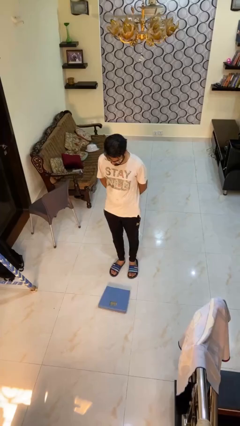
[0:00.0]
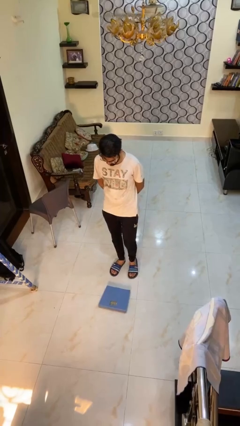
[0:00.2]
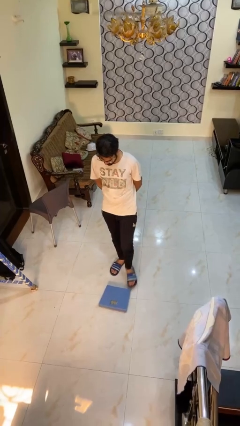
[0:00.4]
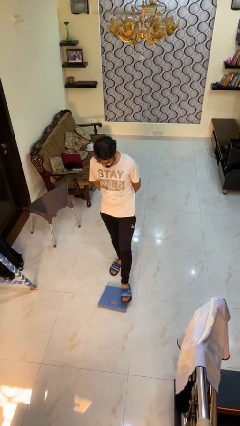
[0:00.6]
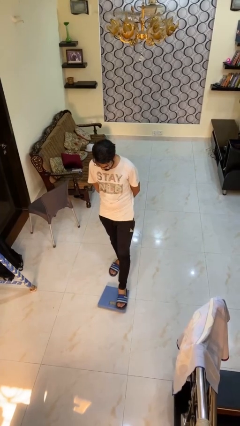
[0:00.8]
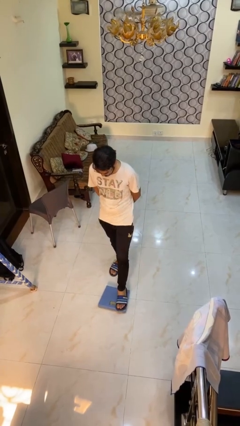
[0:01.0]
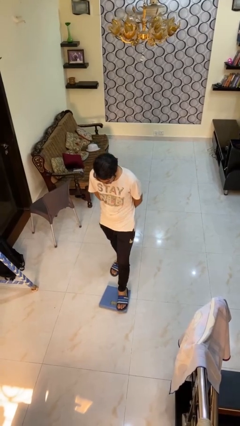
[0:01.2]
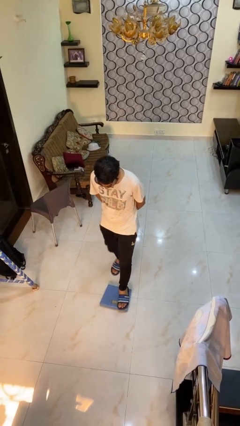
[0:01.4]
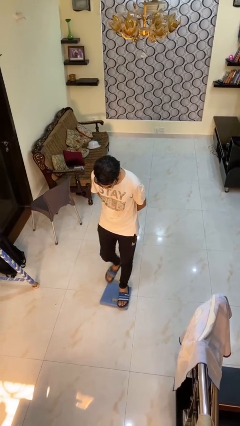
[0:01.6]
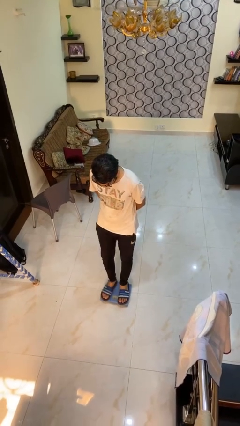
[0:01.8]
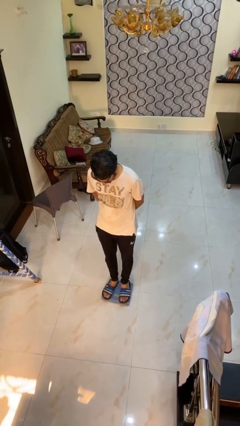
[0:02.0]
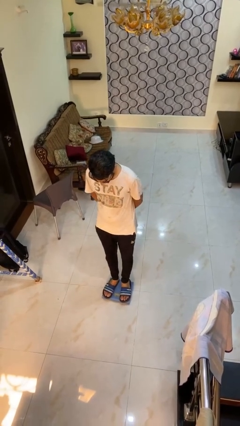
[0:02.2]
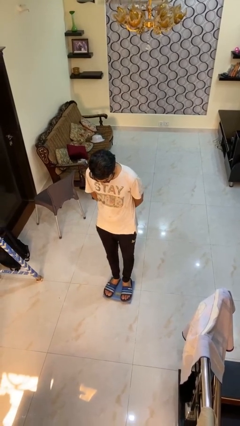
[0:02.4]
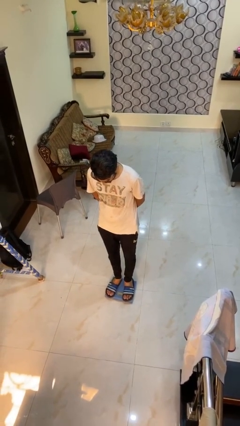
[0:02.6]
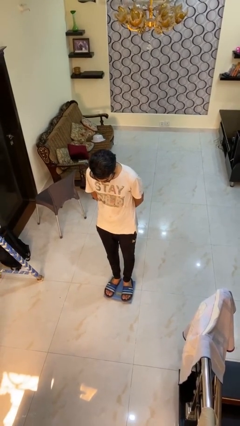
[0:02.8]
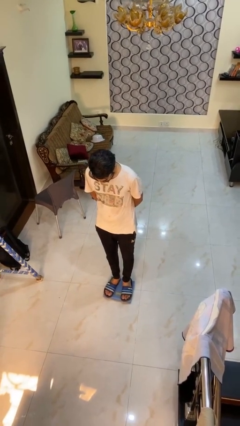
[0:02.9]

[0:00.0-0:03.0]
person uses bodyweight scale

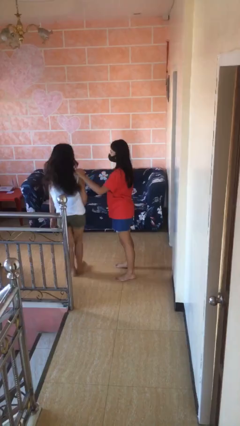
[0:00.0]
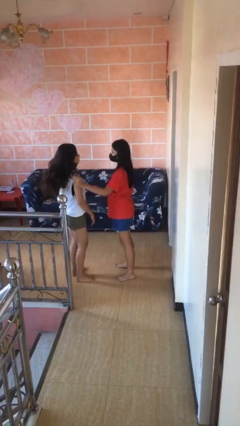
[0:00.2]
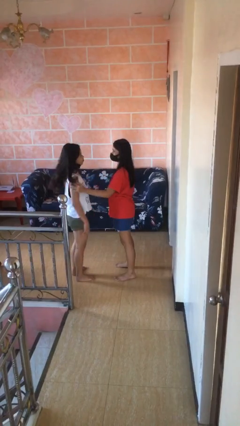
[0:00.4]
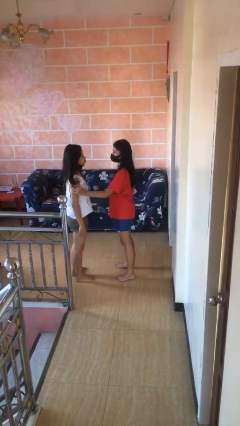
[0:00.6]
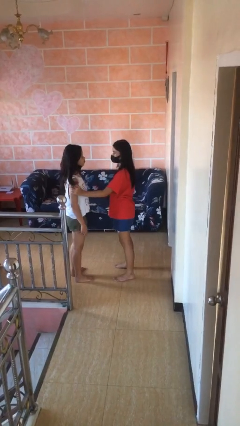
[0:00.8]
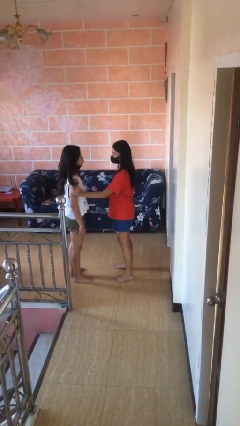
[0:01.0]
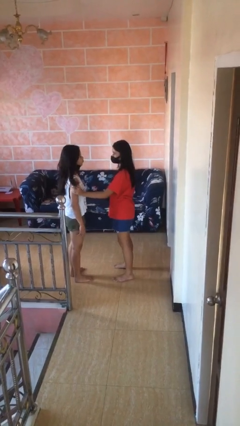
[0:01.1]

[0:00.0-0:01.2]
person spins person around

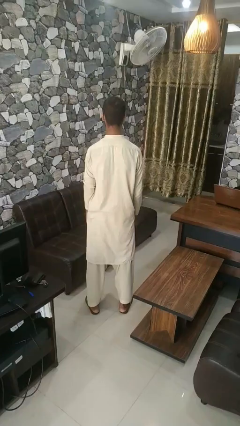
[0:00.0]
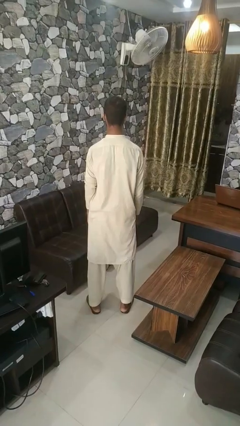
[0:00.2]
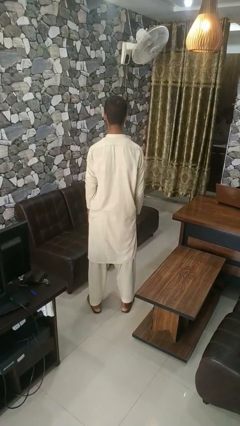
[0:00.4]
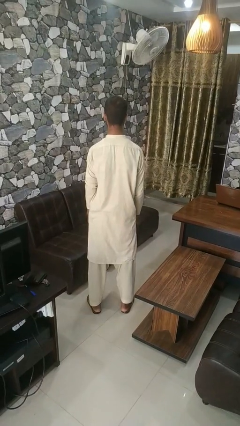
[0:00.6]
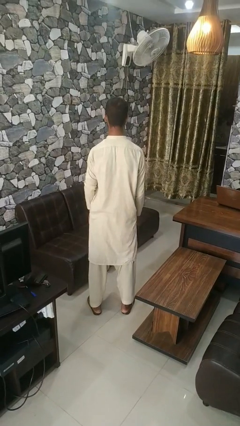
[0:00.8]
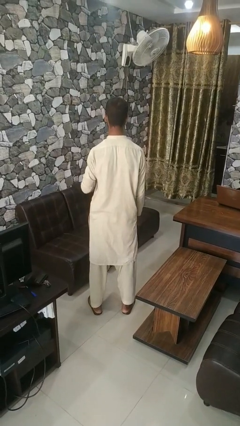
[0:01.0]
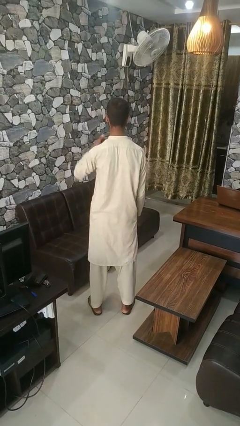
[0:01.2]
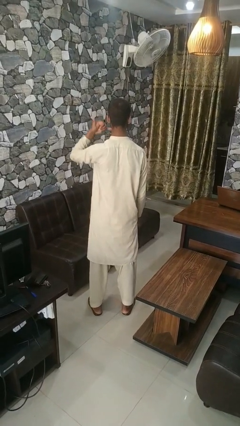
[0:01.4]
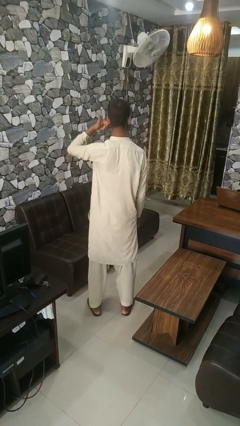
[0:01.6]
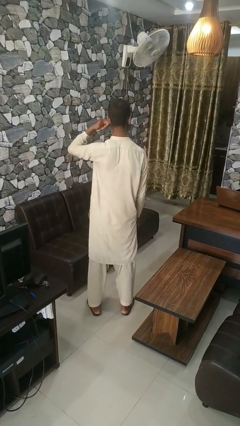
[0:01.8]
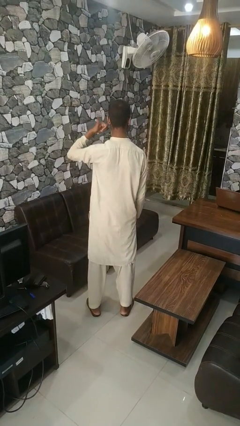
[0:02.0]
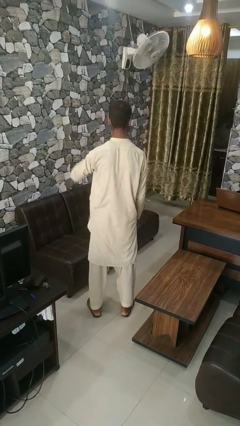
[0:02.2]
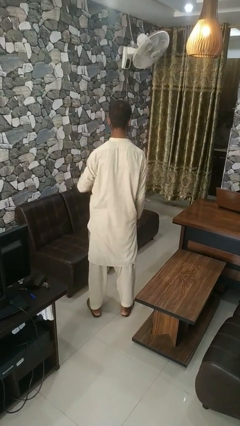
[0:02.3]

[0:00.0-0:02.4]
person gestures call me

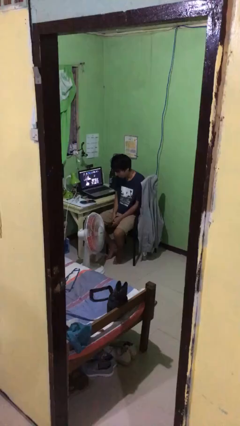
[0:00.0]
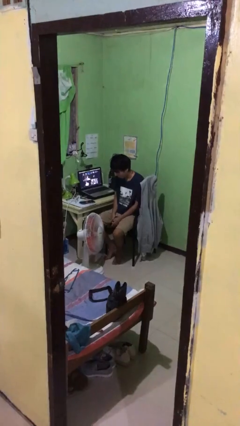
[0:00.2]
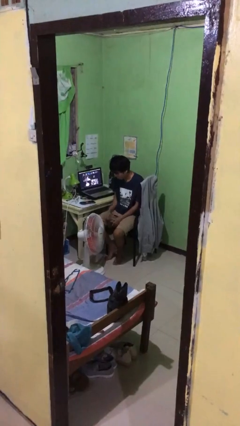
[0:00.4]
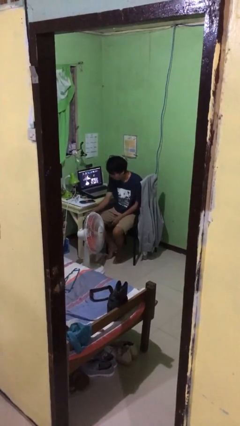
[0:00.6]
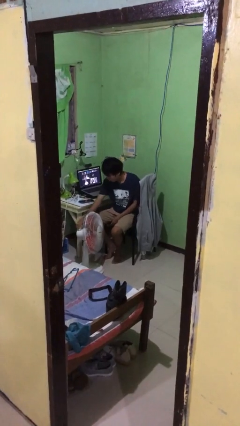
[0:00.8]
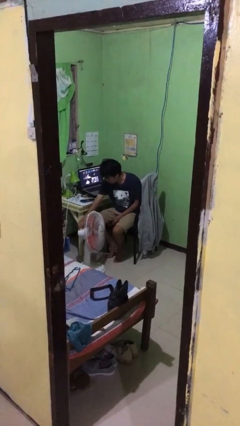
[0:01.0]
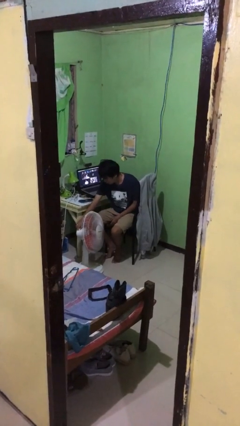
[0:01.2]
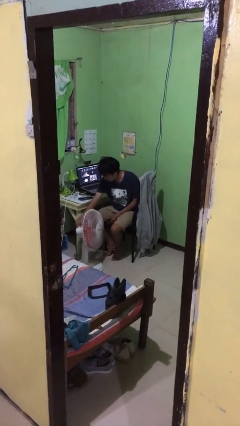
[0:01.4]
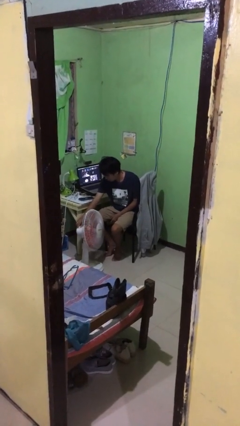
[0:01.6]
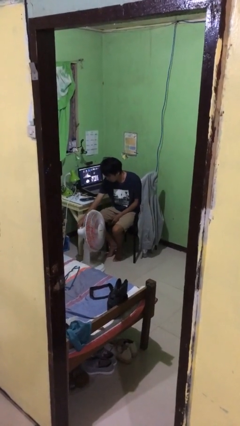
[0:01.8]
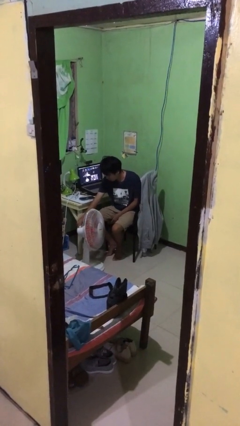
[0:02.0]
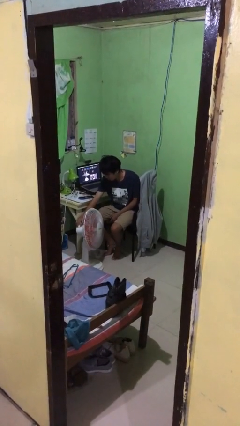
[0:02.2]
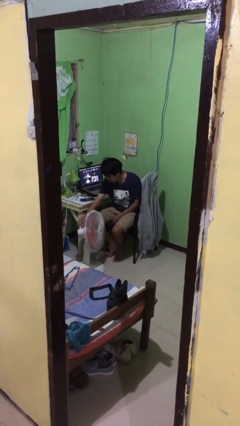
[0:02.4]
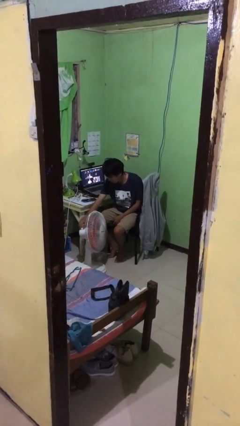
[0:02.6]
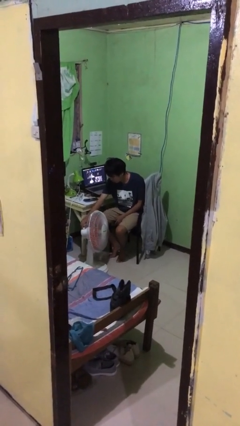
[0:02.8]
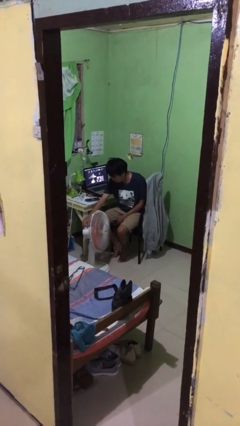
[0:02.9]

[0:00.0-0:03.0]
person turns on fan

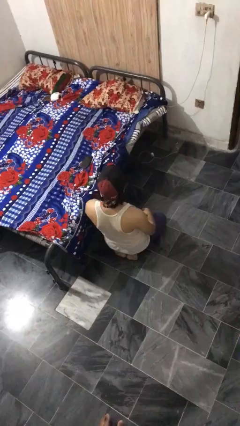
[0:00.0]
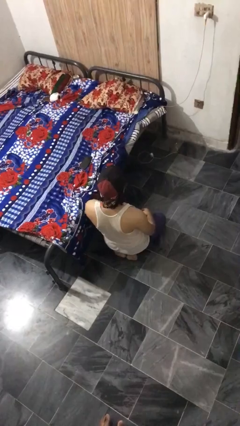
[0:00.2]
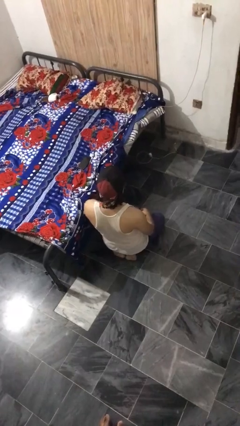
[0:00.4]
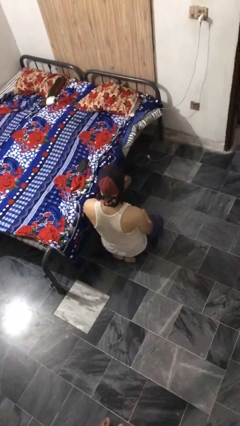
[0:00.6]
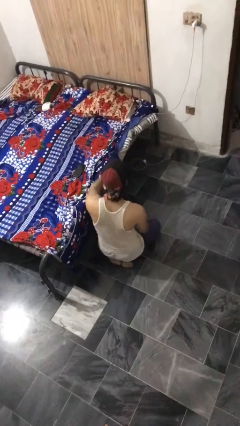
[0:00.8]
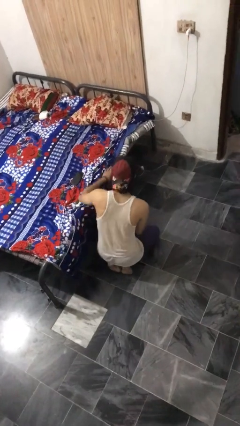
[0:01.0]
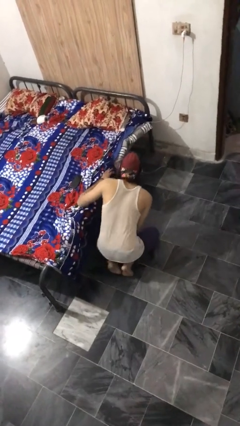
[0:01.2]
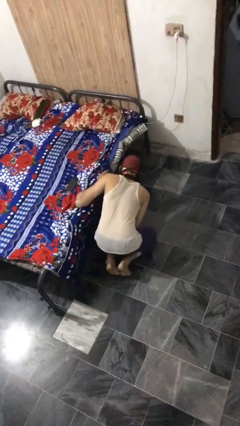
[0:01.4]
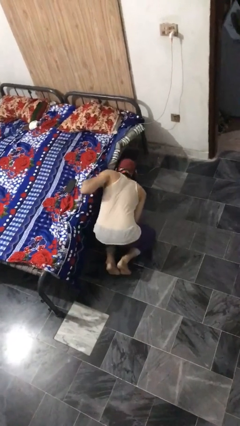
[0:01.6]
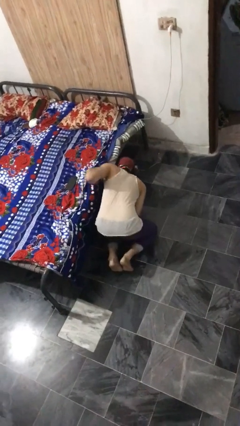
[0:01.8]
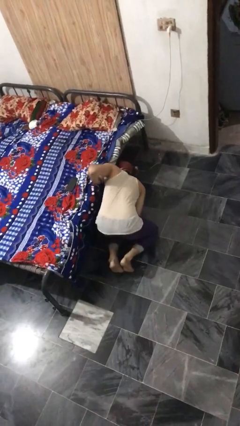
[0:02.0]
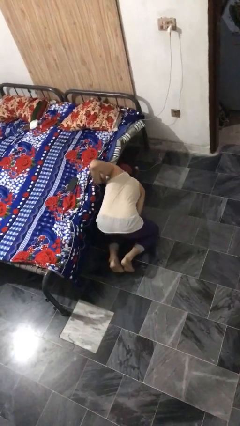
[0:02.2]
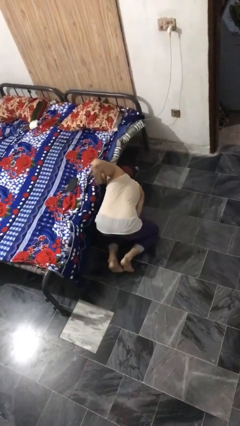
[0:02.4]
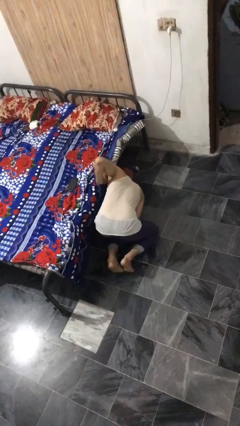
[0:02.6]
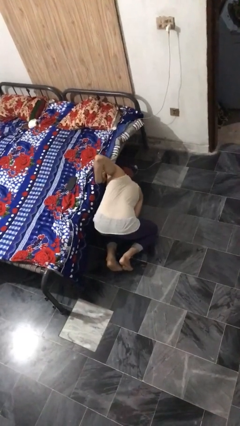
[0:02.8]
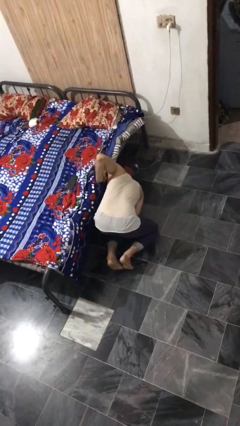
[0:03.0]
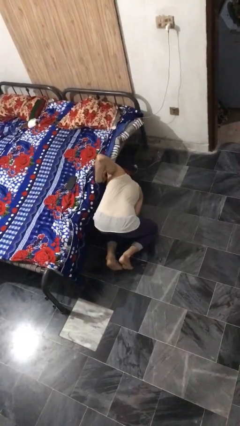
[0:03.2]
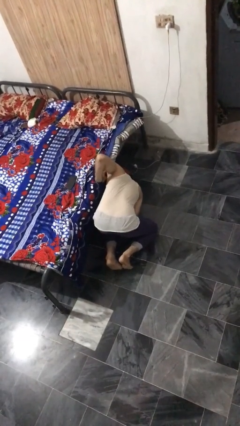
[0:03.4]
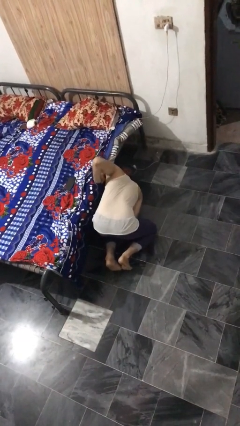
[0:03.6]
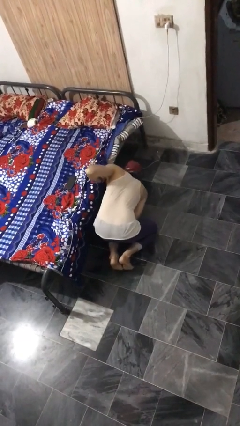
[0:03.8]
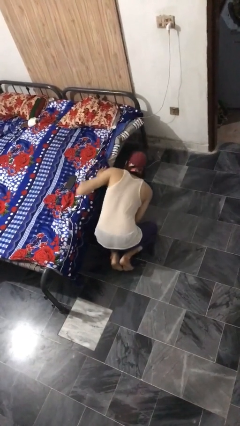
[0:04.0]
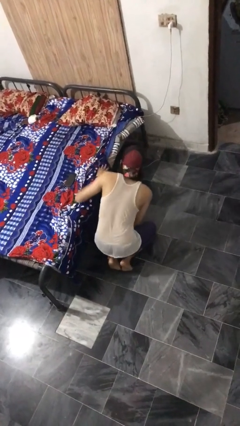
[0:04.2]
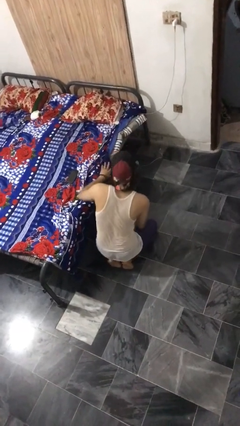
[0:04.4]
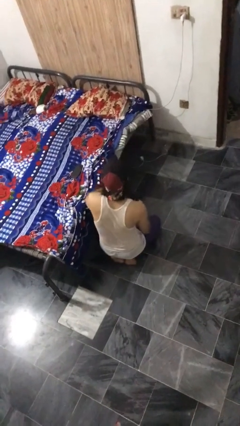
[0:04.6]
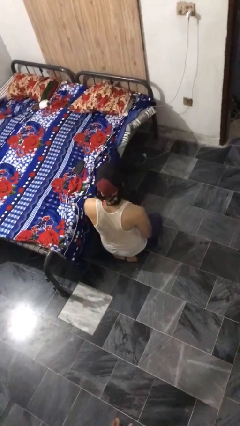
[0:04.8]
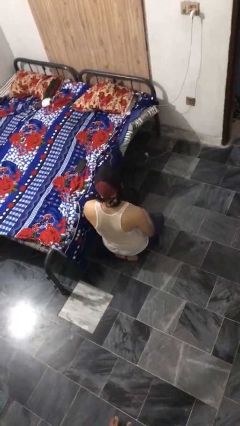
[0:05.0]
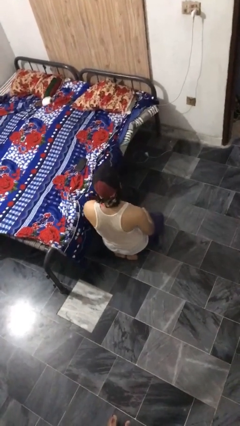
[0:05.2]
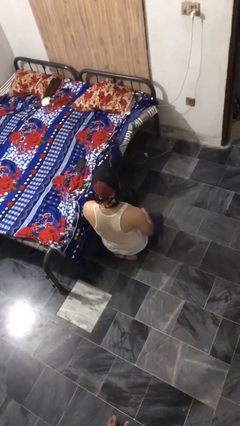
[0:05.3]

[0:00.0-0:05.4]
person searches under bed

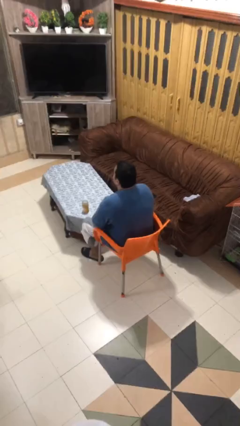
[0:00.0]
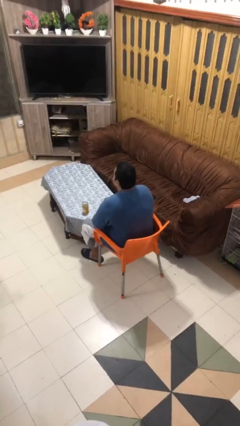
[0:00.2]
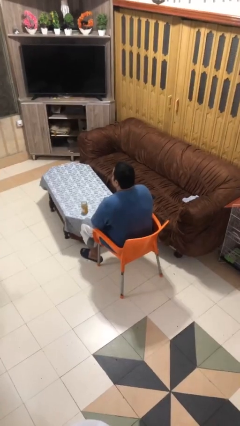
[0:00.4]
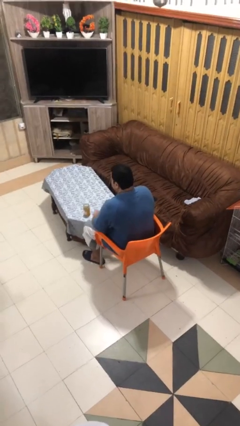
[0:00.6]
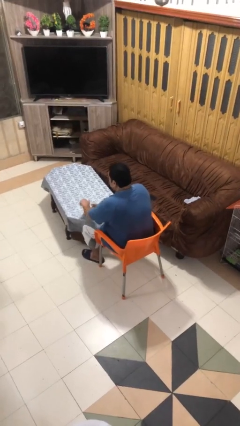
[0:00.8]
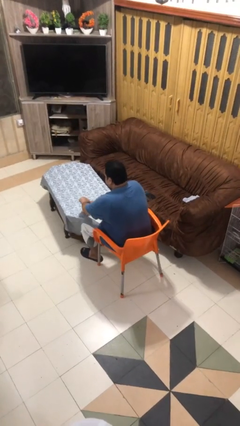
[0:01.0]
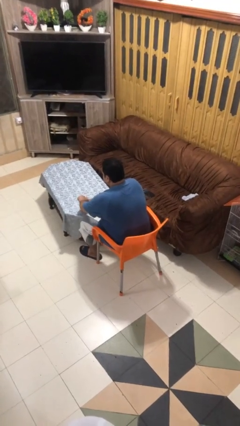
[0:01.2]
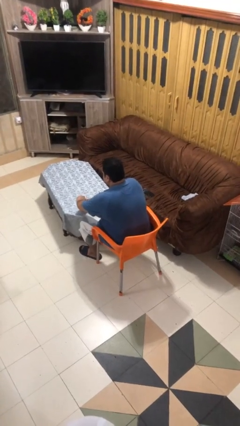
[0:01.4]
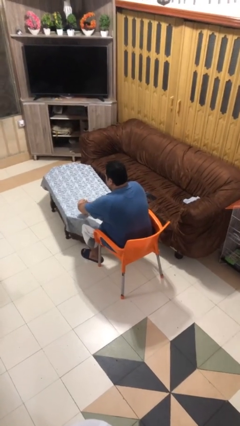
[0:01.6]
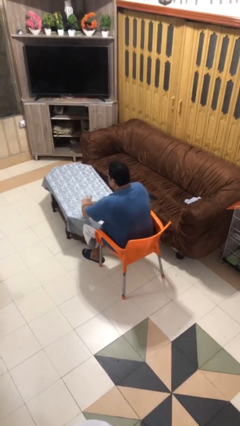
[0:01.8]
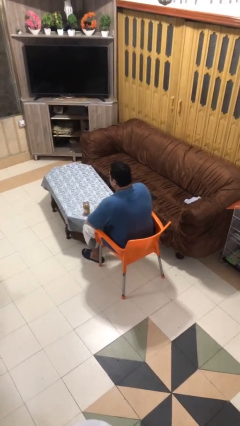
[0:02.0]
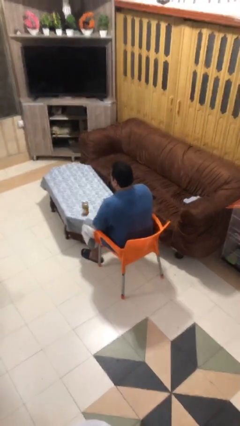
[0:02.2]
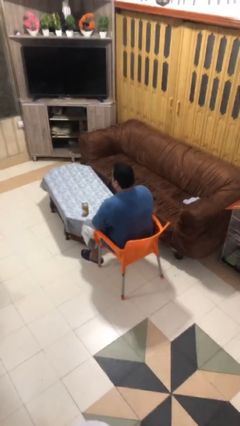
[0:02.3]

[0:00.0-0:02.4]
person closes jar
